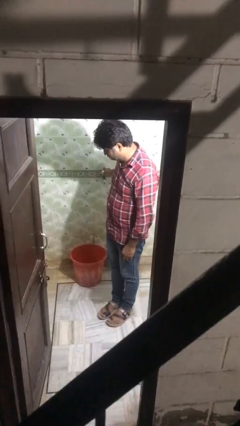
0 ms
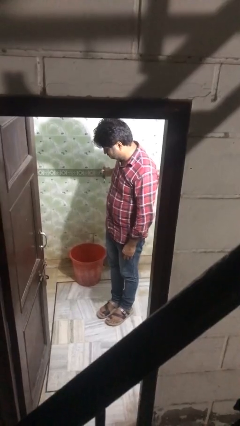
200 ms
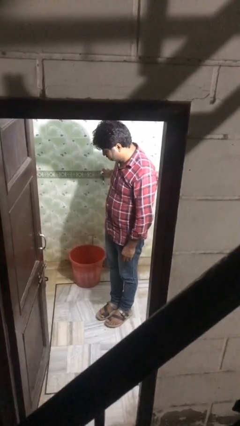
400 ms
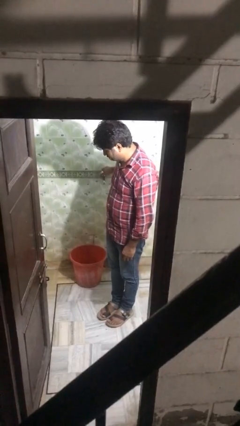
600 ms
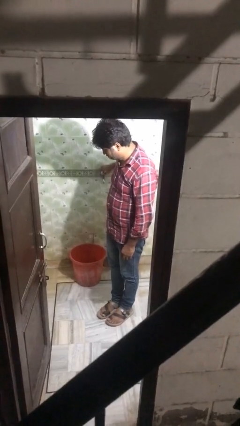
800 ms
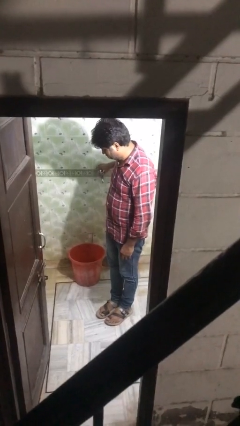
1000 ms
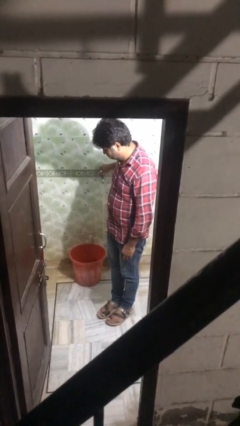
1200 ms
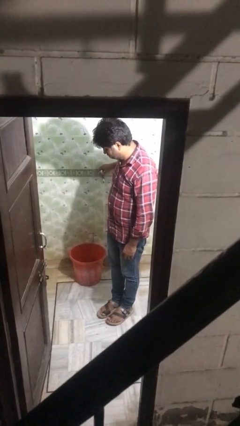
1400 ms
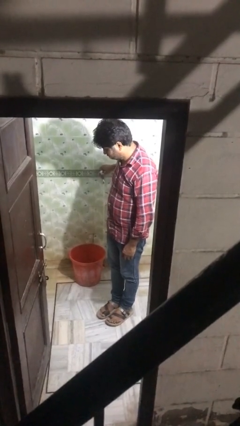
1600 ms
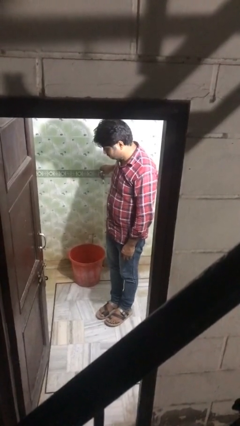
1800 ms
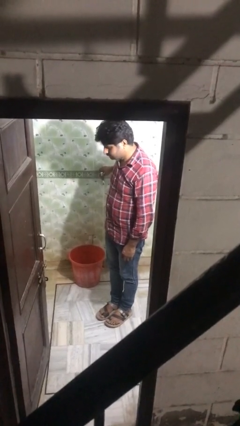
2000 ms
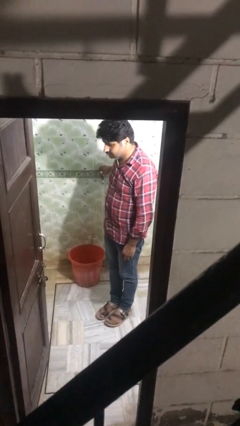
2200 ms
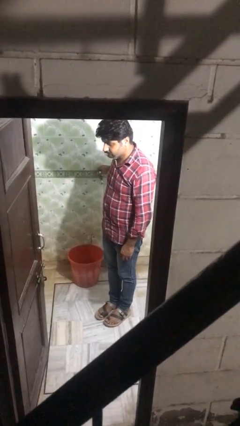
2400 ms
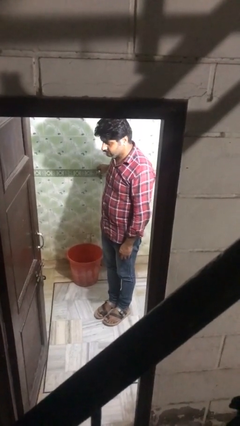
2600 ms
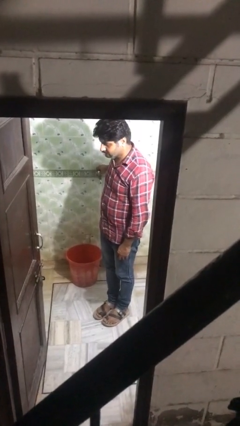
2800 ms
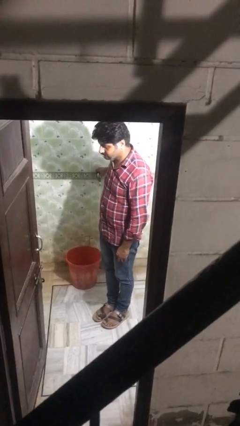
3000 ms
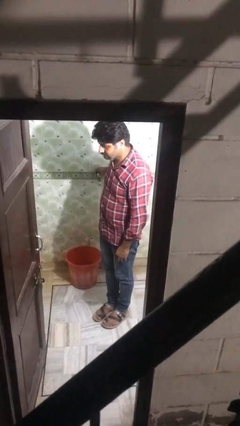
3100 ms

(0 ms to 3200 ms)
person turns on faucet

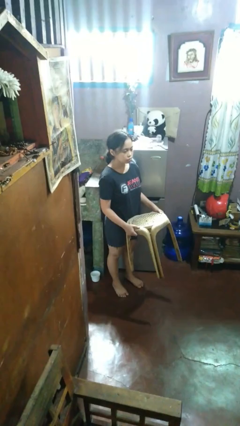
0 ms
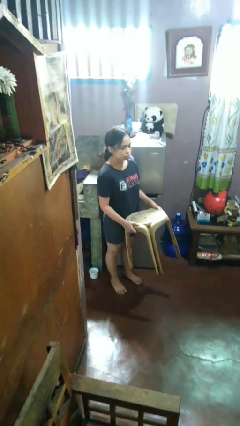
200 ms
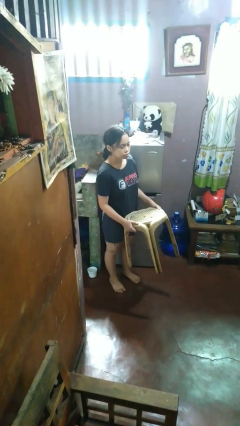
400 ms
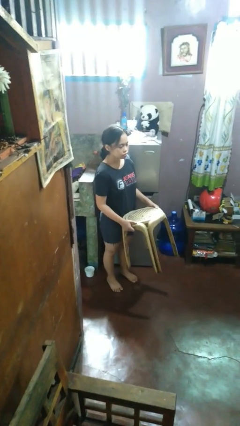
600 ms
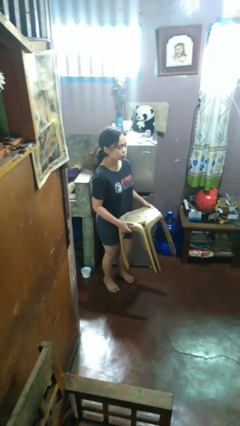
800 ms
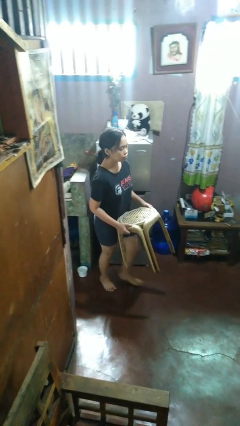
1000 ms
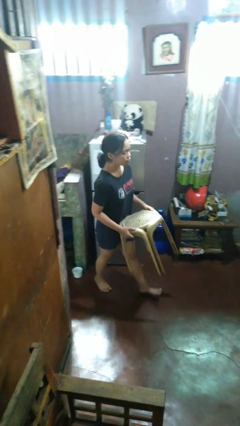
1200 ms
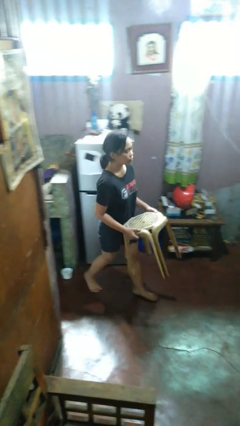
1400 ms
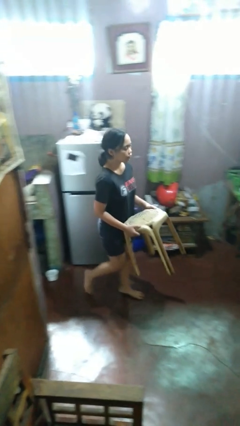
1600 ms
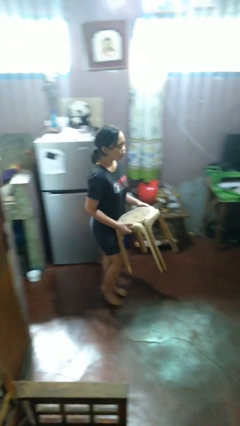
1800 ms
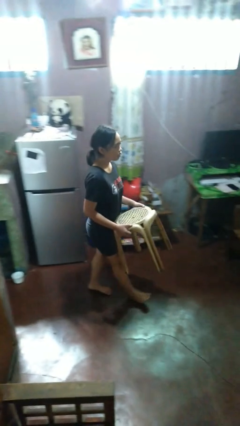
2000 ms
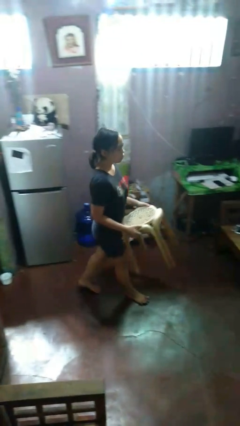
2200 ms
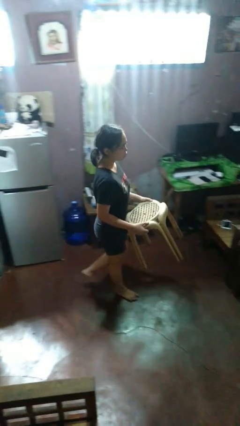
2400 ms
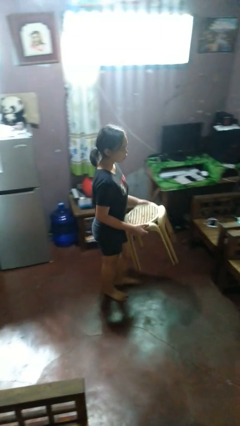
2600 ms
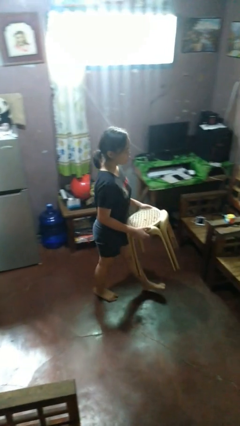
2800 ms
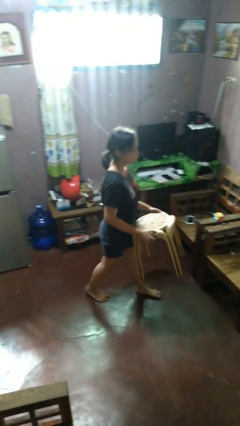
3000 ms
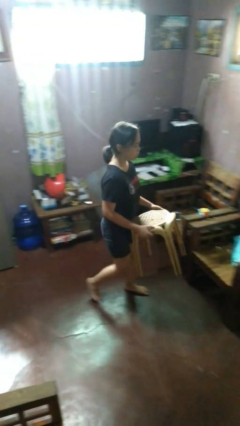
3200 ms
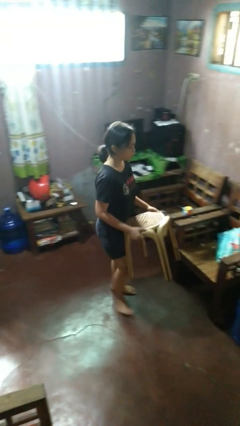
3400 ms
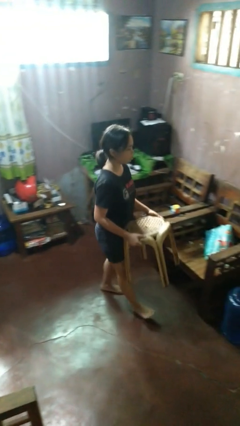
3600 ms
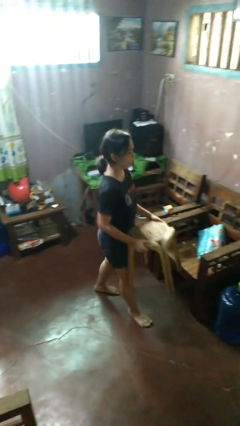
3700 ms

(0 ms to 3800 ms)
person carries furniture

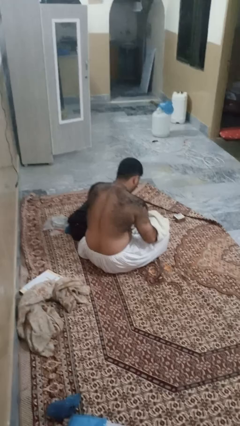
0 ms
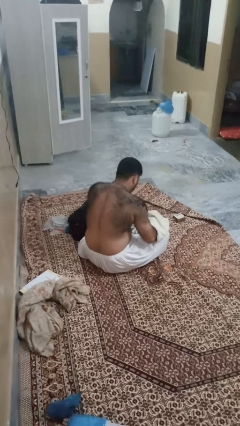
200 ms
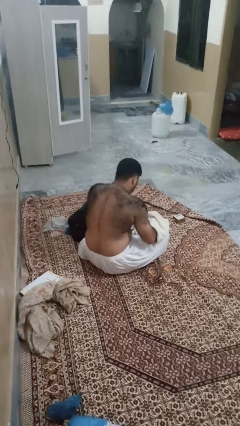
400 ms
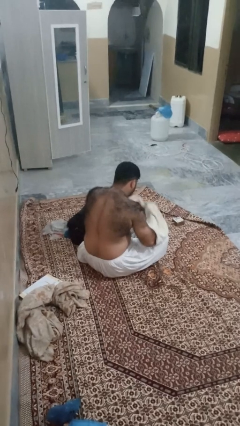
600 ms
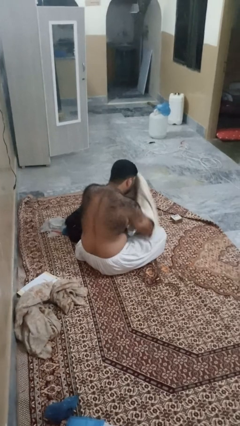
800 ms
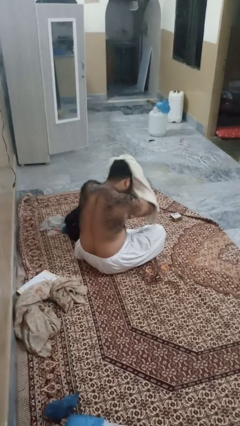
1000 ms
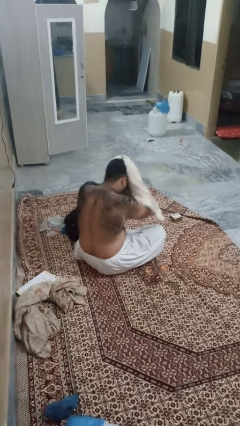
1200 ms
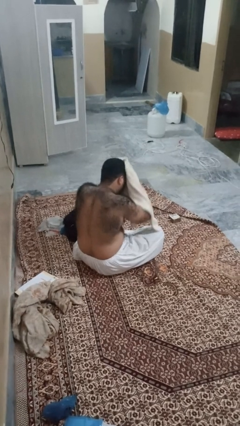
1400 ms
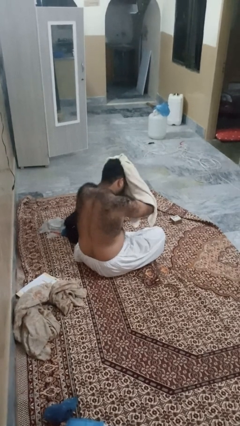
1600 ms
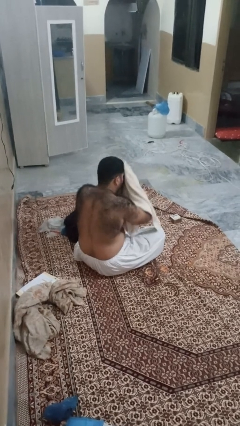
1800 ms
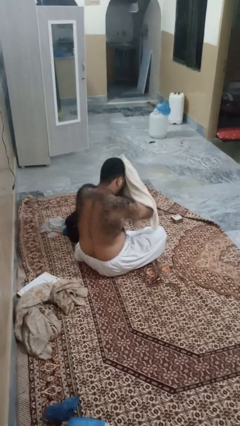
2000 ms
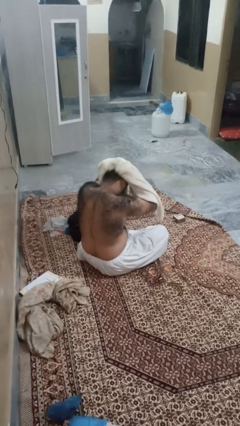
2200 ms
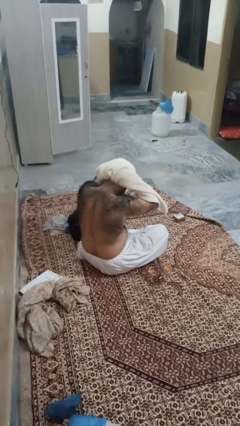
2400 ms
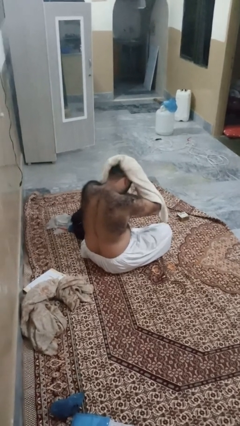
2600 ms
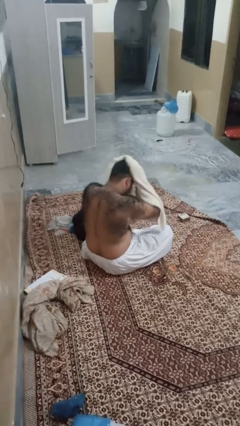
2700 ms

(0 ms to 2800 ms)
person dries hair with towel

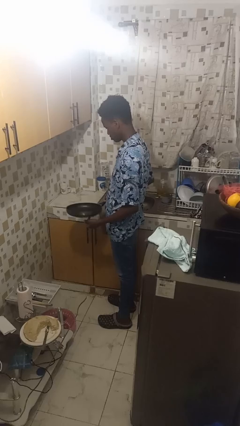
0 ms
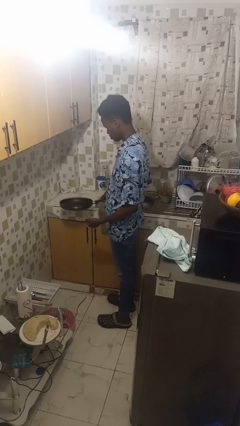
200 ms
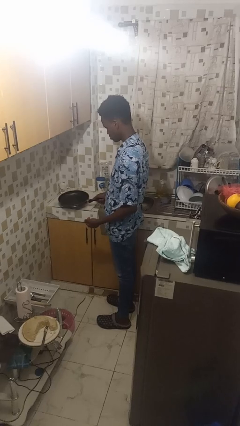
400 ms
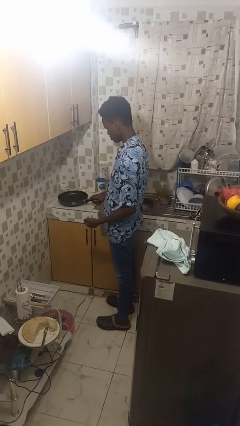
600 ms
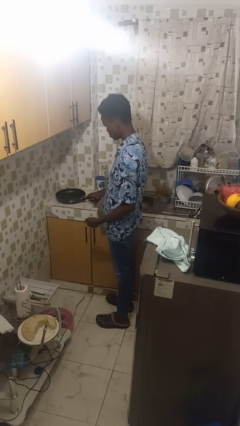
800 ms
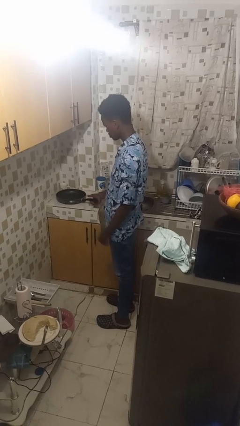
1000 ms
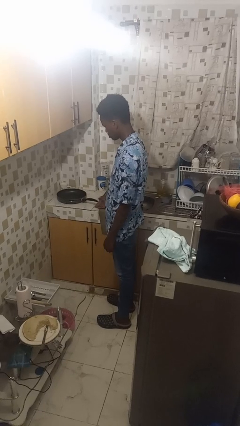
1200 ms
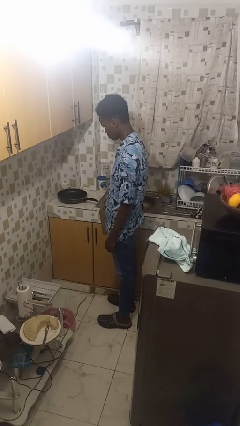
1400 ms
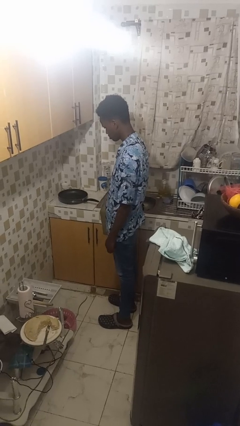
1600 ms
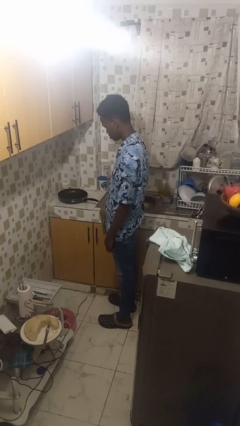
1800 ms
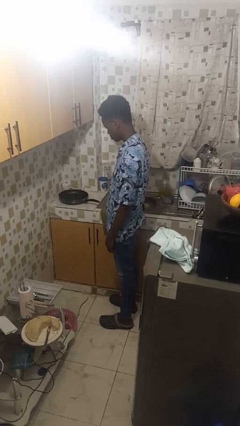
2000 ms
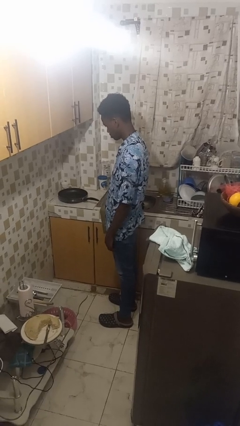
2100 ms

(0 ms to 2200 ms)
person puts down object on countertop

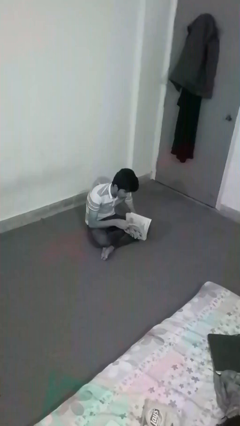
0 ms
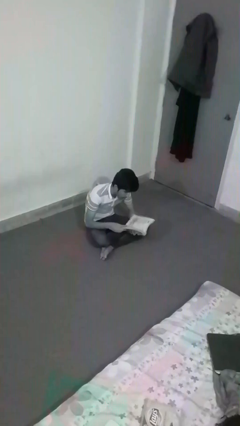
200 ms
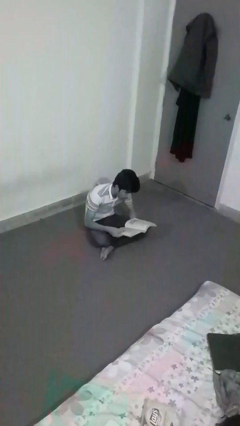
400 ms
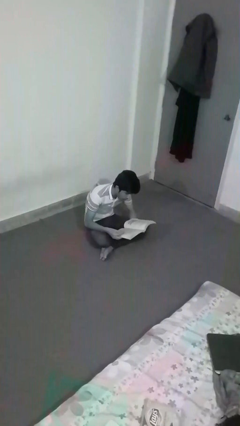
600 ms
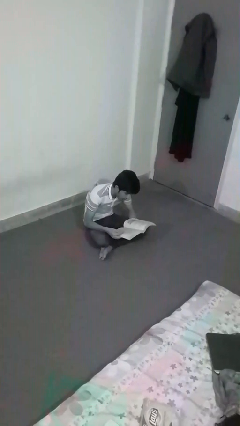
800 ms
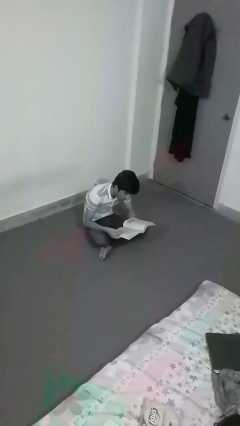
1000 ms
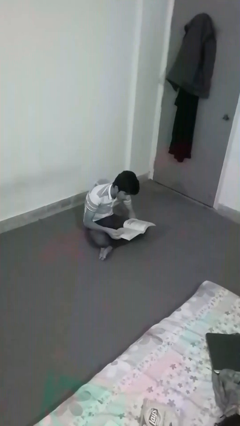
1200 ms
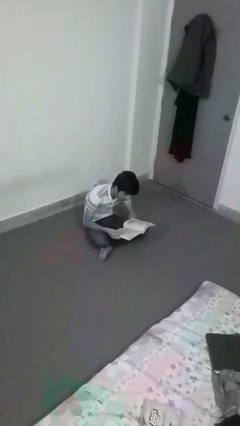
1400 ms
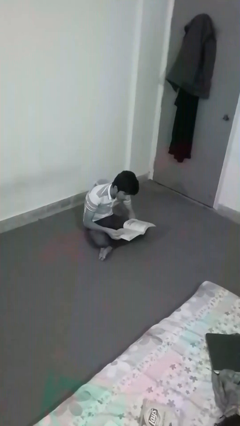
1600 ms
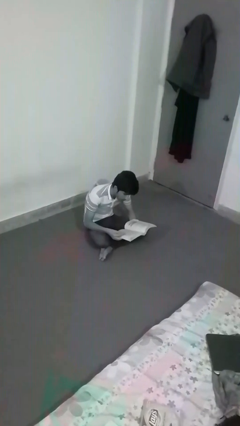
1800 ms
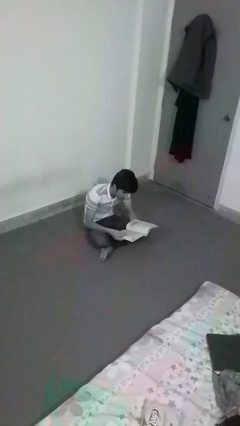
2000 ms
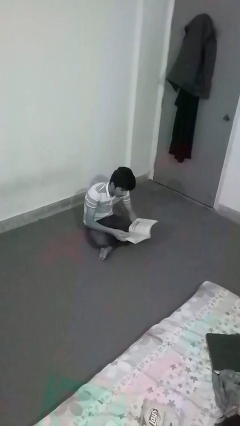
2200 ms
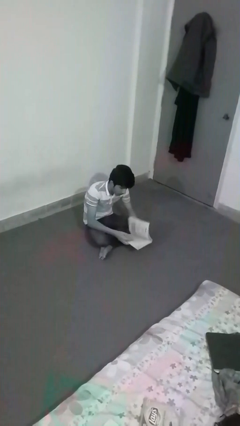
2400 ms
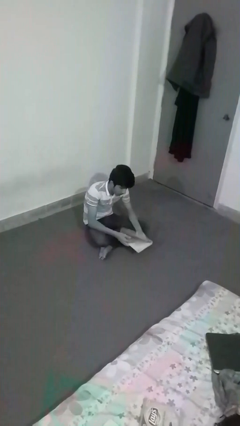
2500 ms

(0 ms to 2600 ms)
person reads document

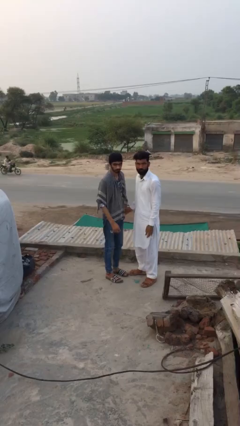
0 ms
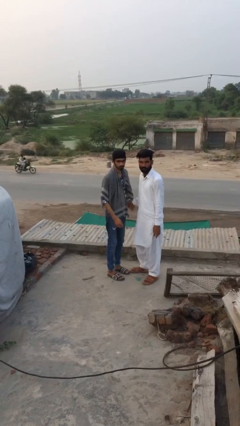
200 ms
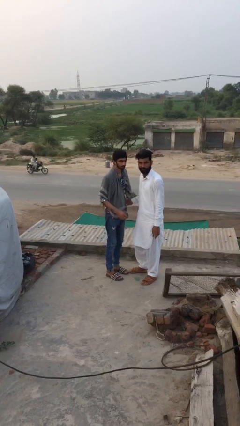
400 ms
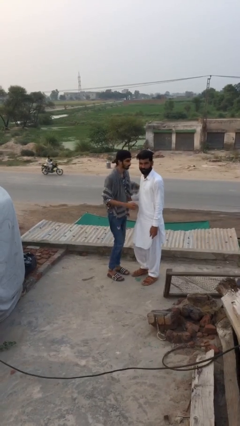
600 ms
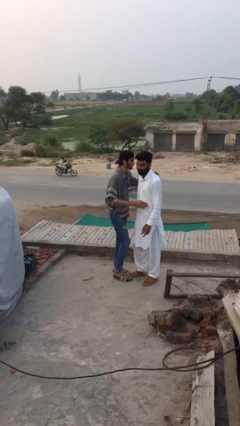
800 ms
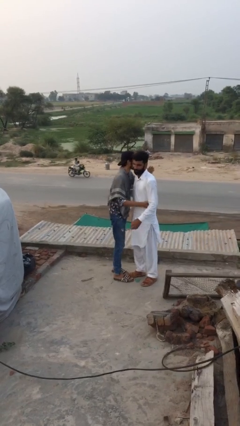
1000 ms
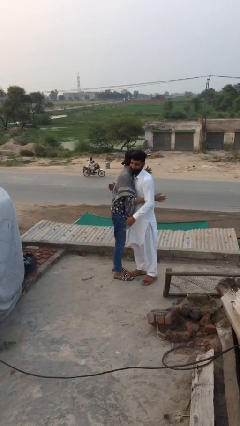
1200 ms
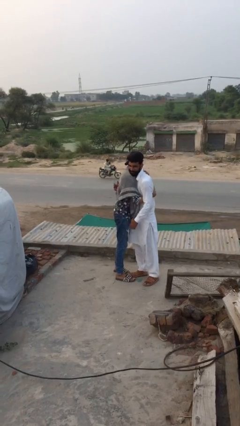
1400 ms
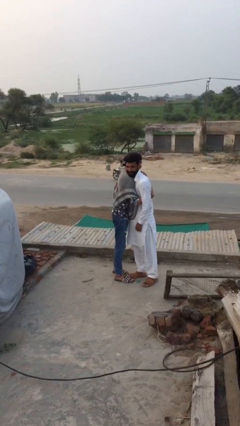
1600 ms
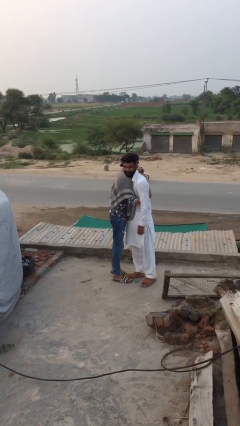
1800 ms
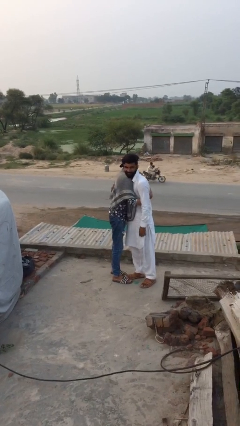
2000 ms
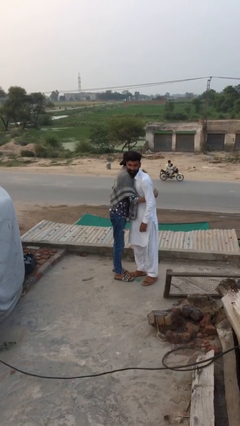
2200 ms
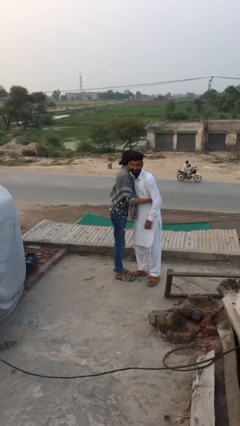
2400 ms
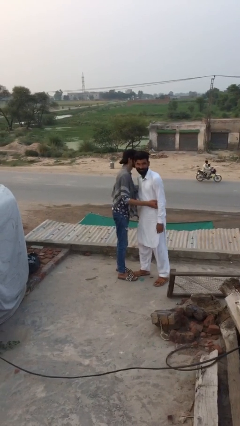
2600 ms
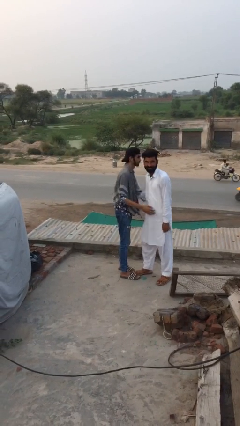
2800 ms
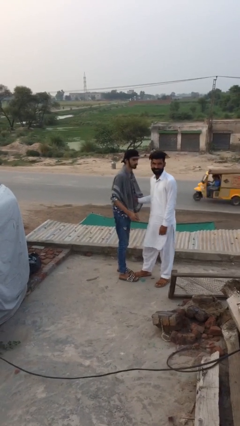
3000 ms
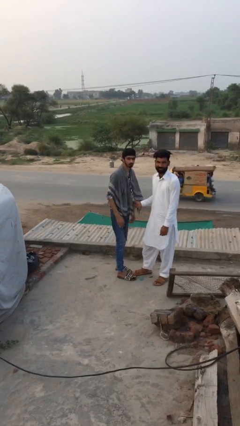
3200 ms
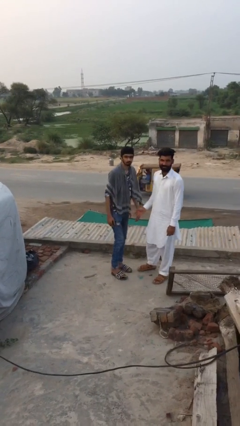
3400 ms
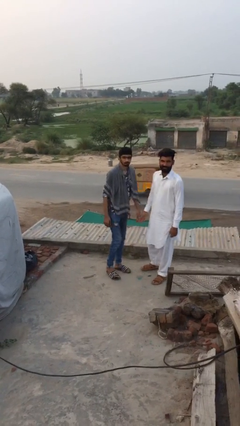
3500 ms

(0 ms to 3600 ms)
person embraces person
